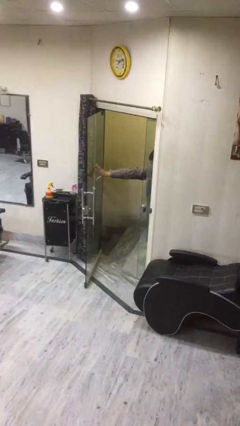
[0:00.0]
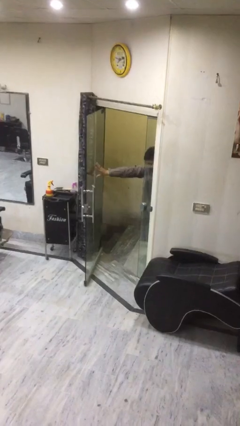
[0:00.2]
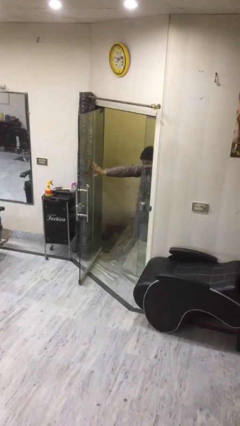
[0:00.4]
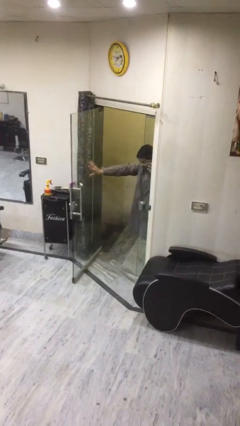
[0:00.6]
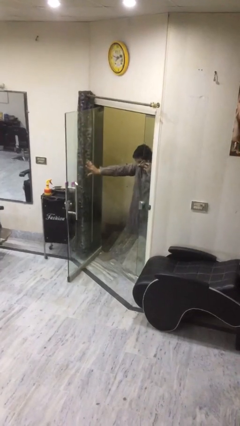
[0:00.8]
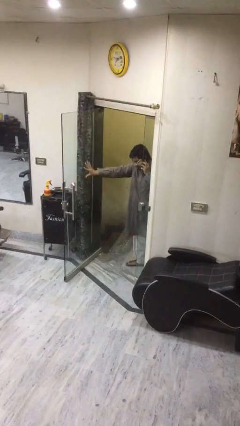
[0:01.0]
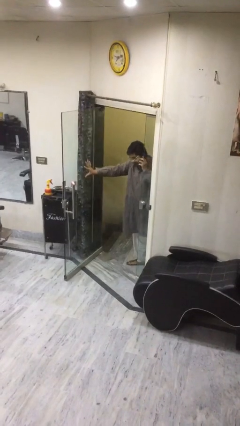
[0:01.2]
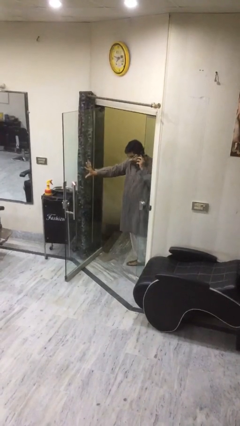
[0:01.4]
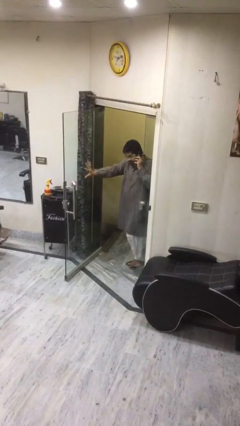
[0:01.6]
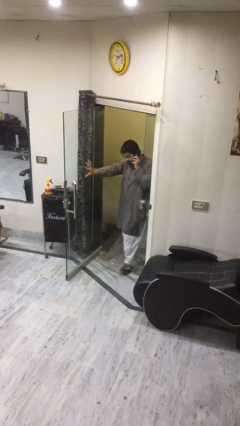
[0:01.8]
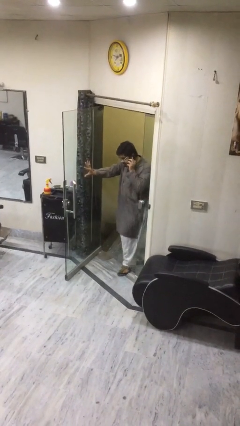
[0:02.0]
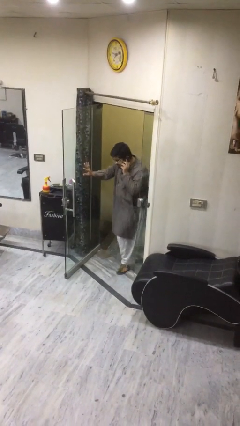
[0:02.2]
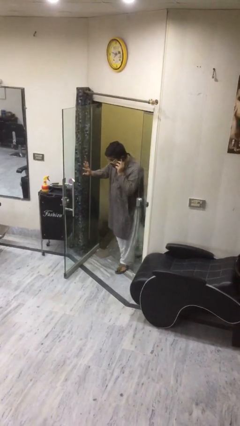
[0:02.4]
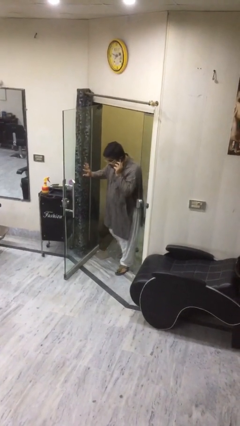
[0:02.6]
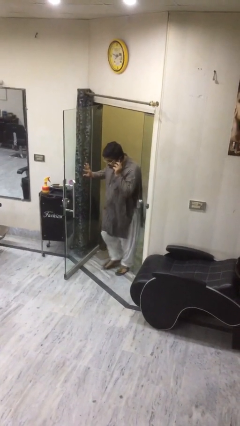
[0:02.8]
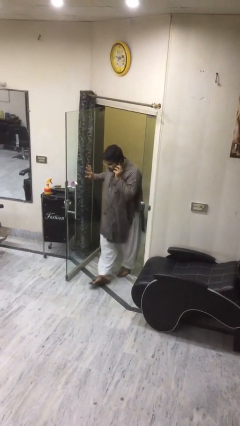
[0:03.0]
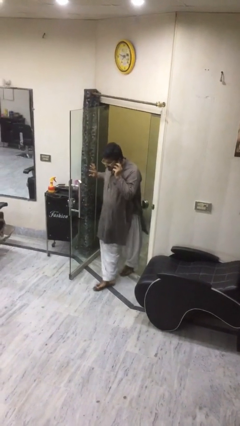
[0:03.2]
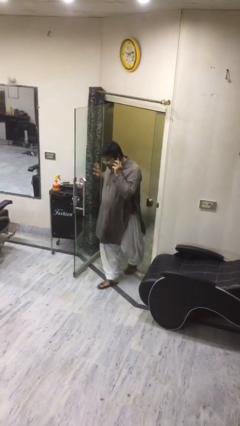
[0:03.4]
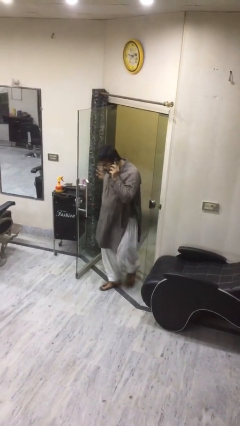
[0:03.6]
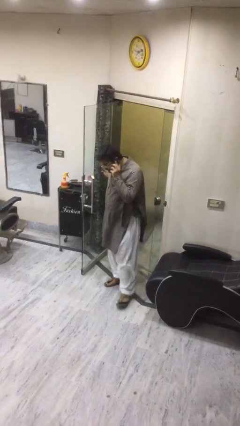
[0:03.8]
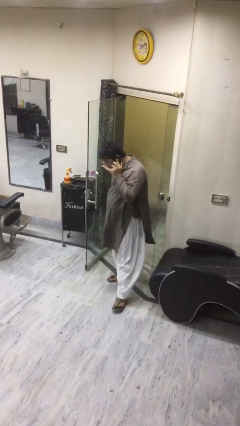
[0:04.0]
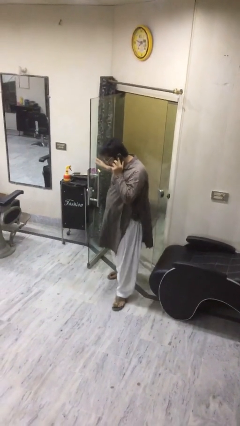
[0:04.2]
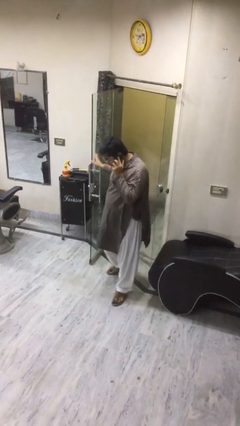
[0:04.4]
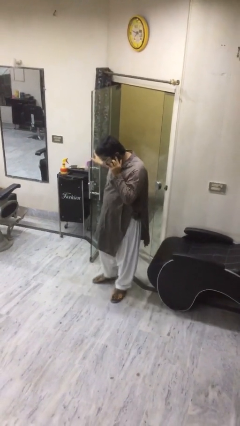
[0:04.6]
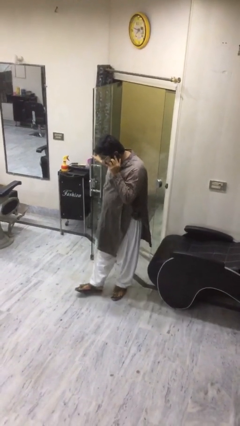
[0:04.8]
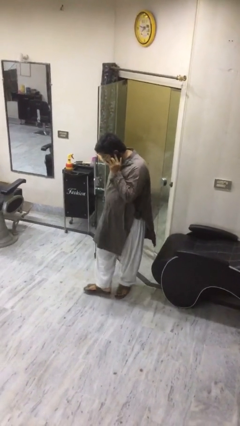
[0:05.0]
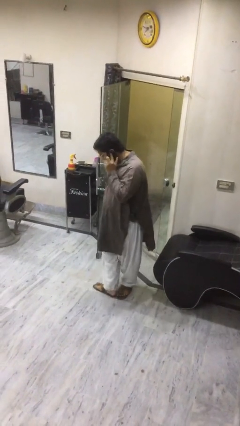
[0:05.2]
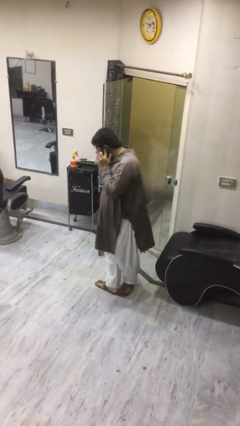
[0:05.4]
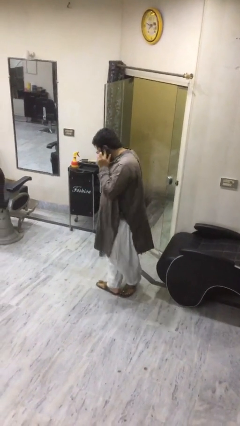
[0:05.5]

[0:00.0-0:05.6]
person enters scene through structure

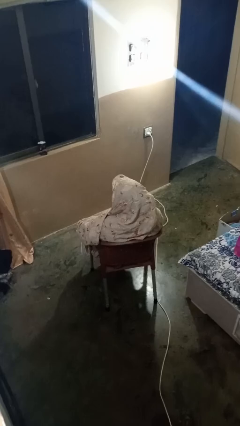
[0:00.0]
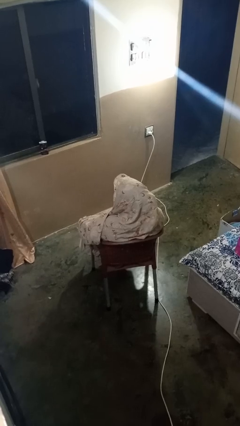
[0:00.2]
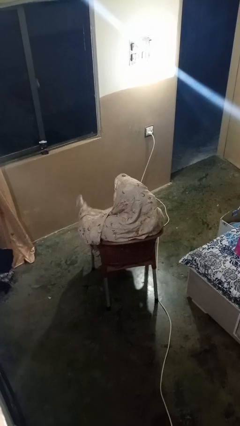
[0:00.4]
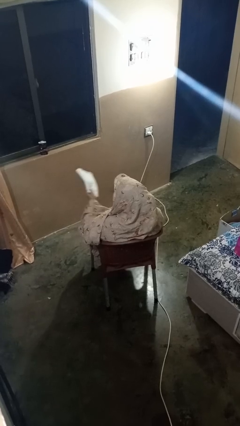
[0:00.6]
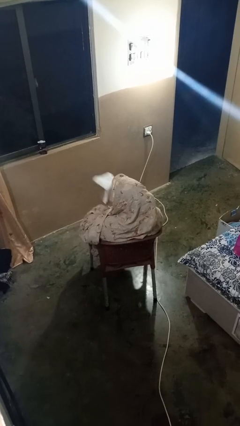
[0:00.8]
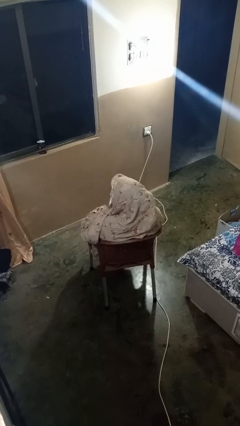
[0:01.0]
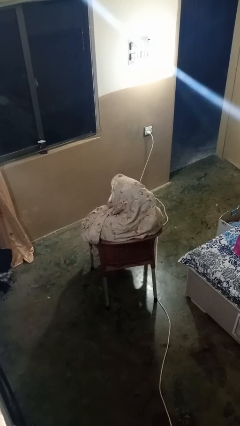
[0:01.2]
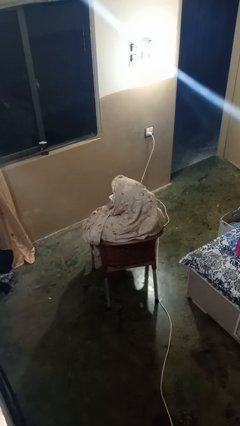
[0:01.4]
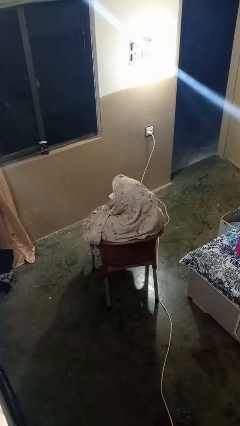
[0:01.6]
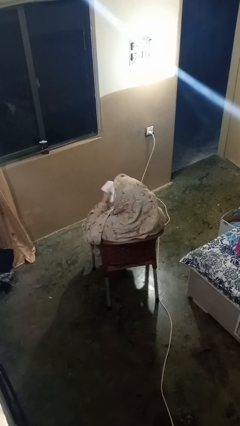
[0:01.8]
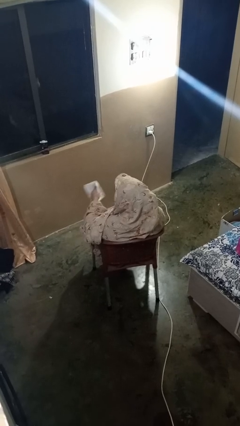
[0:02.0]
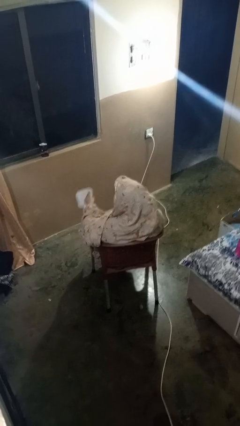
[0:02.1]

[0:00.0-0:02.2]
person wipes mouth with napkin

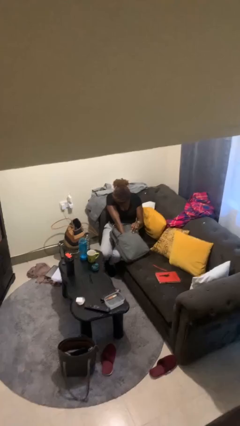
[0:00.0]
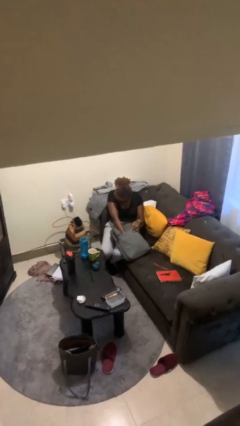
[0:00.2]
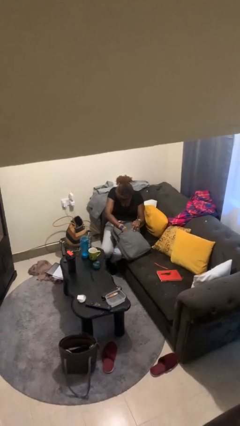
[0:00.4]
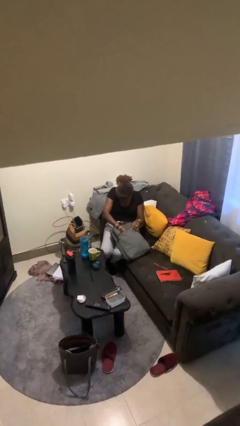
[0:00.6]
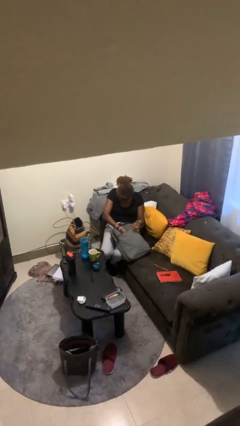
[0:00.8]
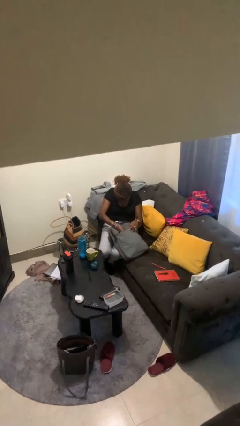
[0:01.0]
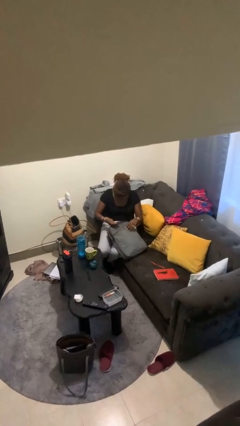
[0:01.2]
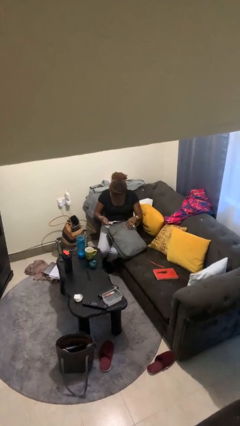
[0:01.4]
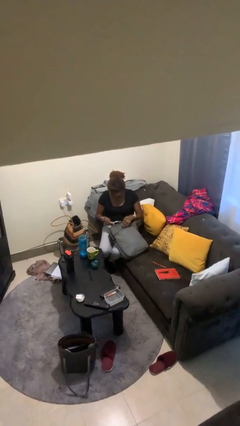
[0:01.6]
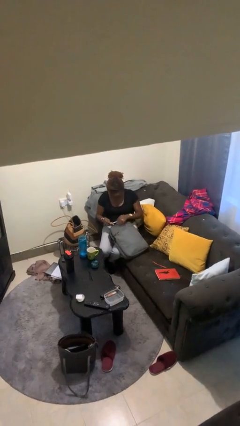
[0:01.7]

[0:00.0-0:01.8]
person takes object from backpack

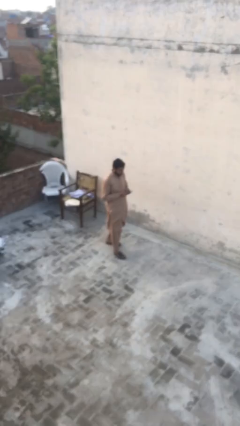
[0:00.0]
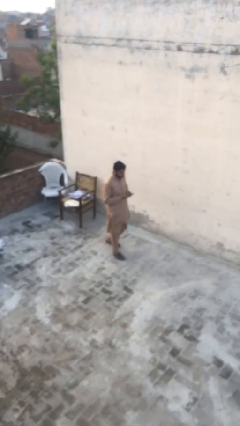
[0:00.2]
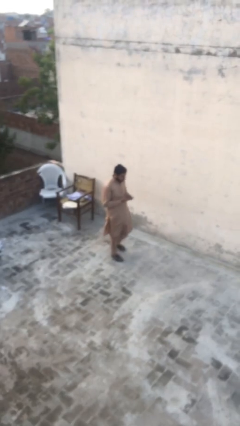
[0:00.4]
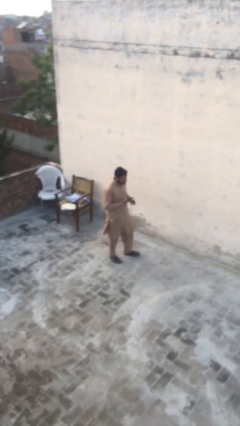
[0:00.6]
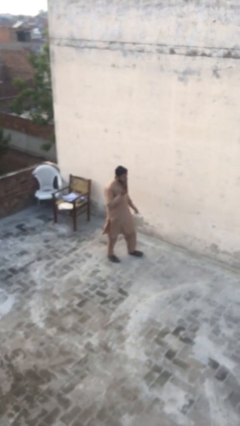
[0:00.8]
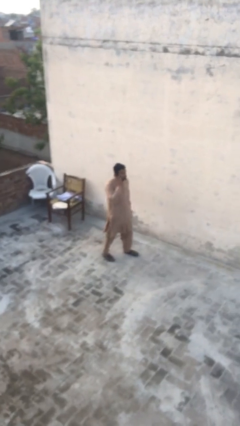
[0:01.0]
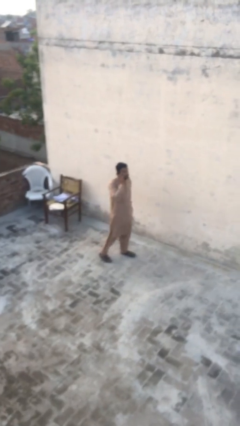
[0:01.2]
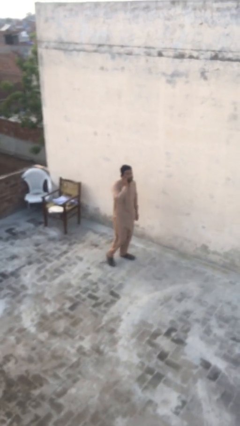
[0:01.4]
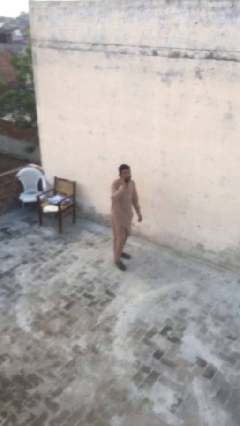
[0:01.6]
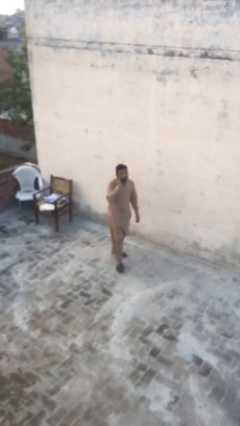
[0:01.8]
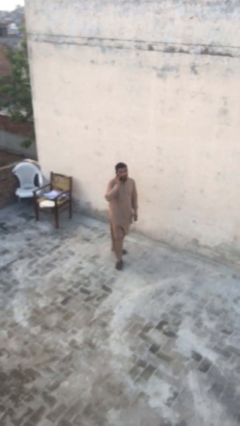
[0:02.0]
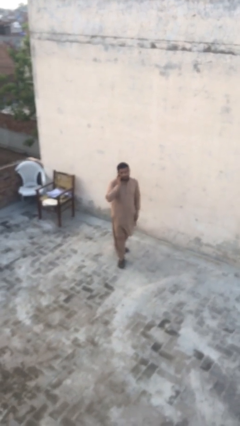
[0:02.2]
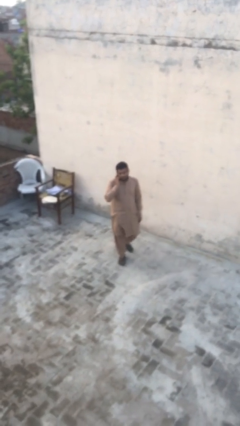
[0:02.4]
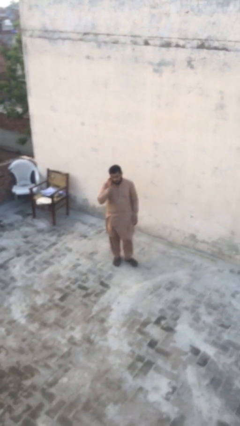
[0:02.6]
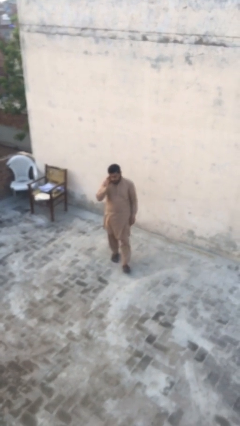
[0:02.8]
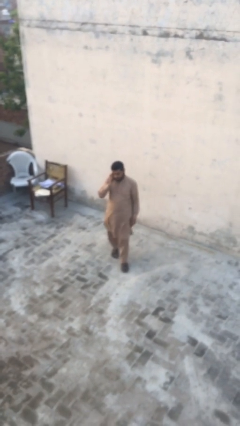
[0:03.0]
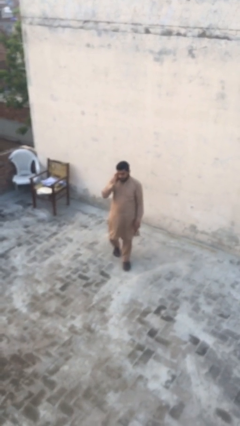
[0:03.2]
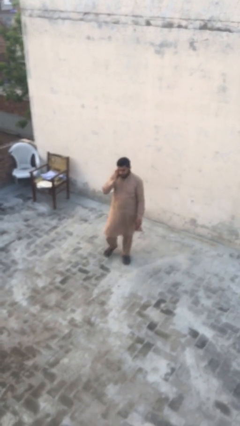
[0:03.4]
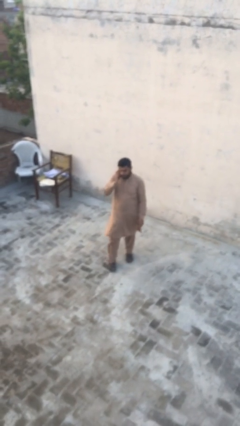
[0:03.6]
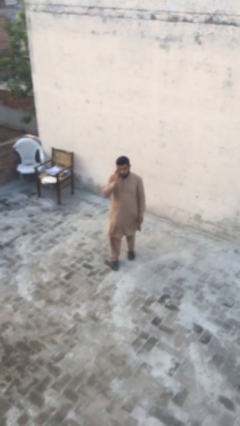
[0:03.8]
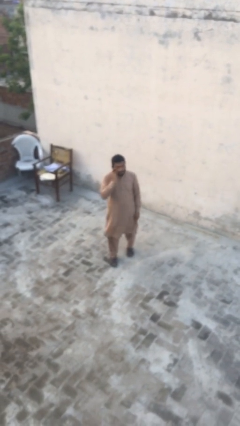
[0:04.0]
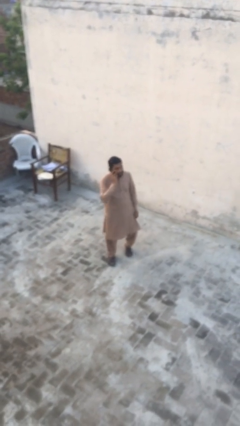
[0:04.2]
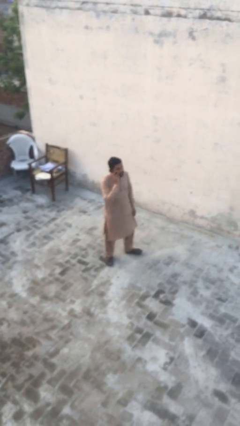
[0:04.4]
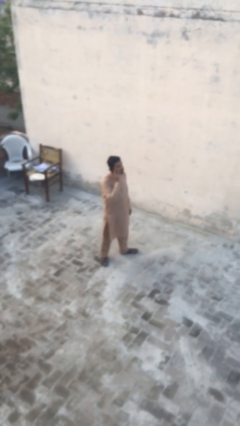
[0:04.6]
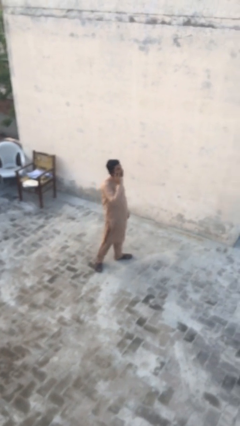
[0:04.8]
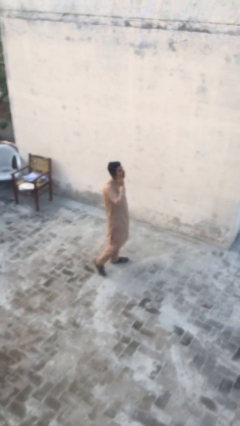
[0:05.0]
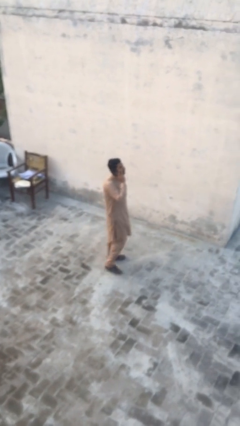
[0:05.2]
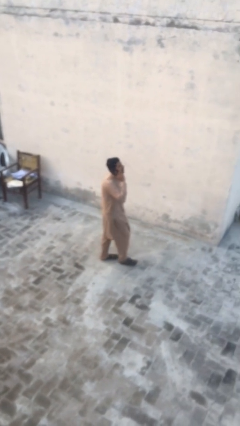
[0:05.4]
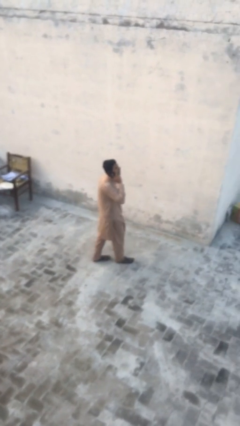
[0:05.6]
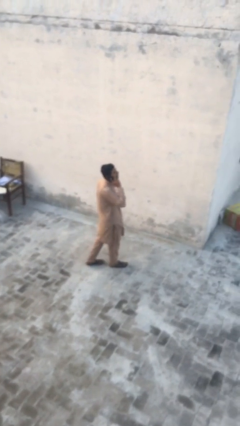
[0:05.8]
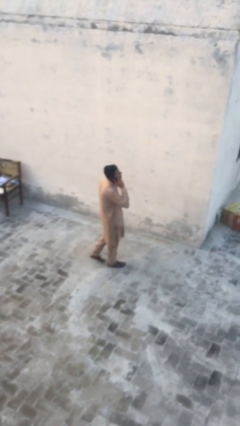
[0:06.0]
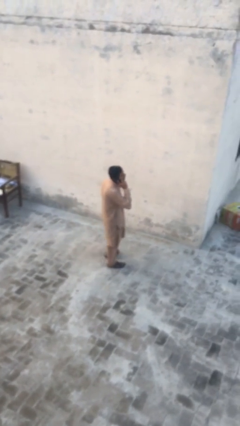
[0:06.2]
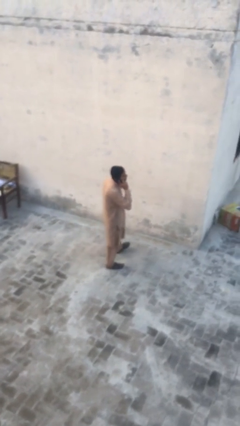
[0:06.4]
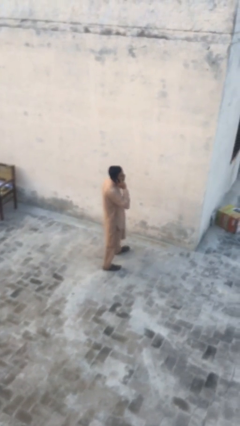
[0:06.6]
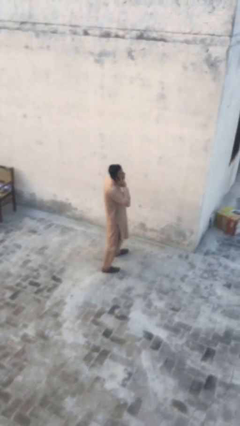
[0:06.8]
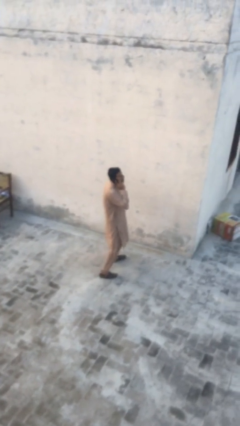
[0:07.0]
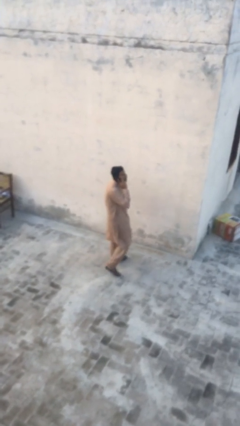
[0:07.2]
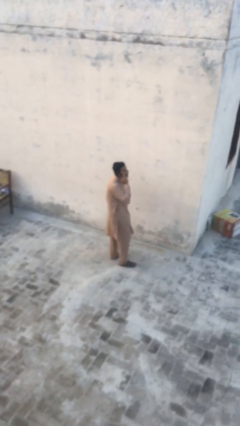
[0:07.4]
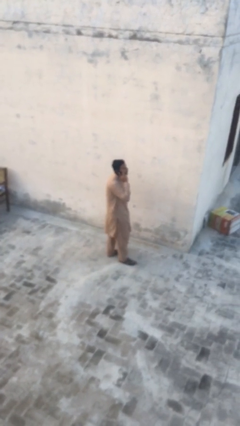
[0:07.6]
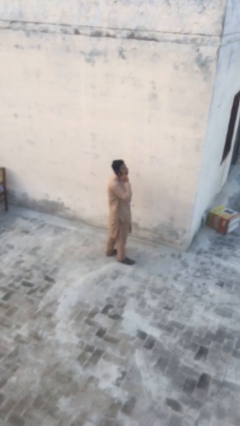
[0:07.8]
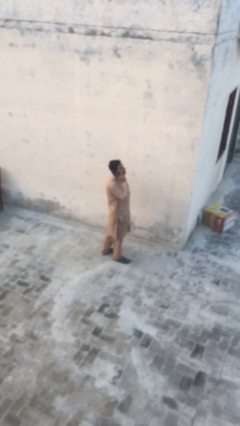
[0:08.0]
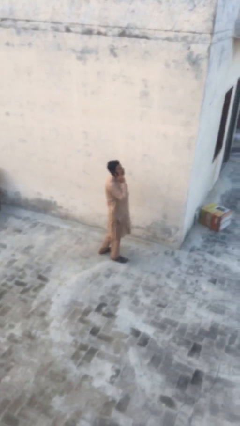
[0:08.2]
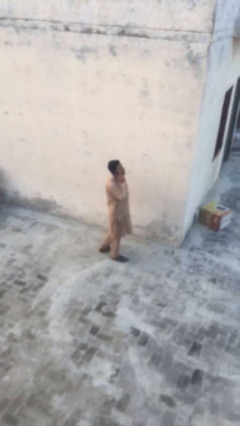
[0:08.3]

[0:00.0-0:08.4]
person talks on phone
